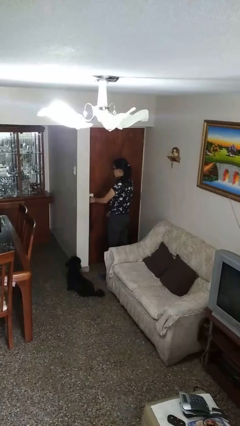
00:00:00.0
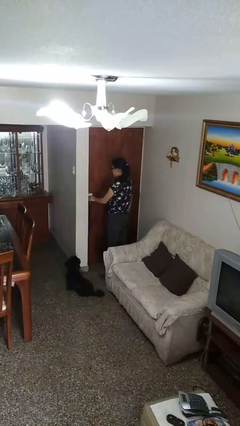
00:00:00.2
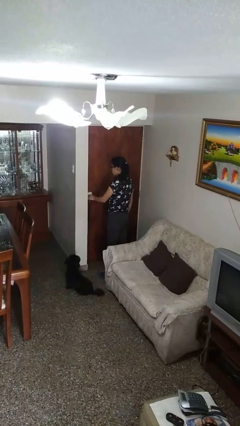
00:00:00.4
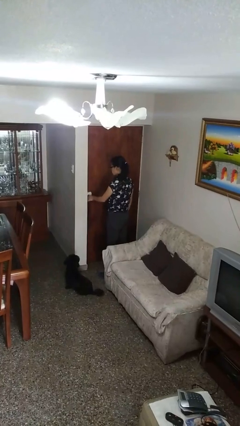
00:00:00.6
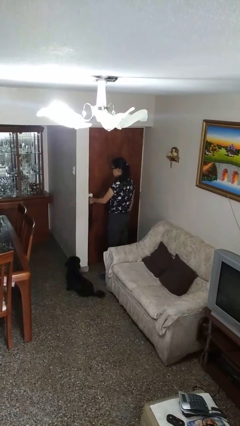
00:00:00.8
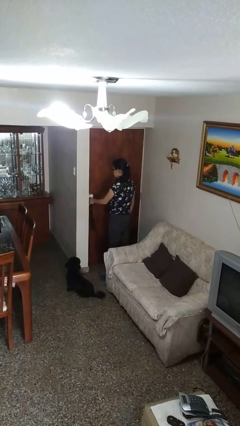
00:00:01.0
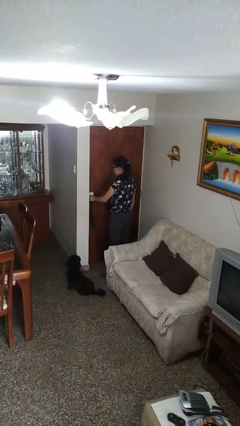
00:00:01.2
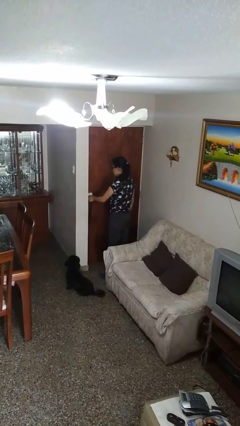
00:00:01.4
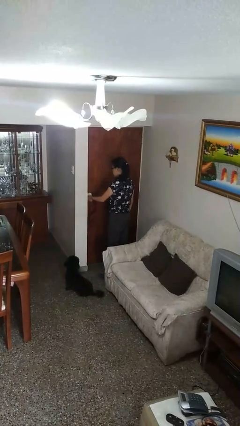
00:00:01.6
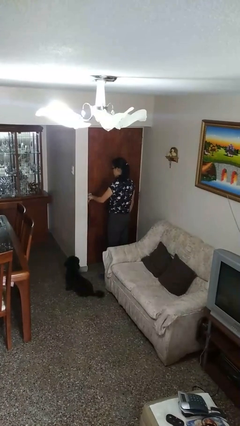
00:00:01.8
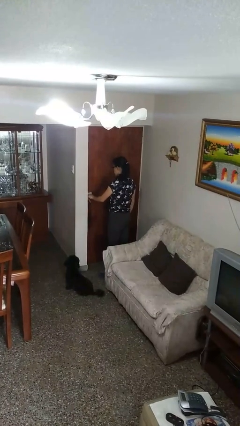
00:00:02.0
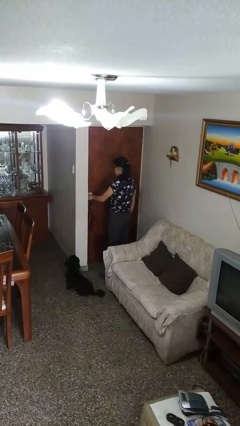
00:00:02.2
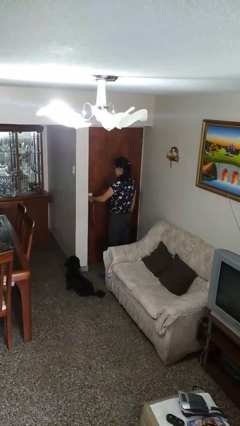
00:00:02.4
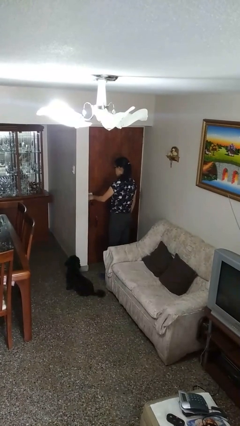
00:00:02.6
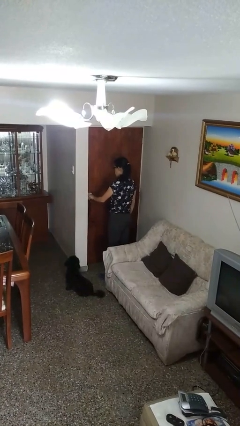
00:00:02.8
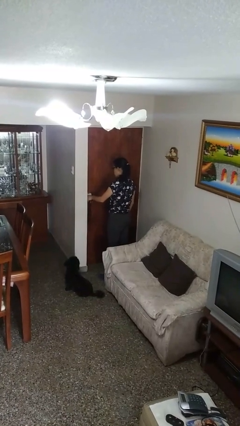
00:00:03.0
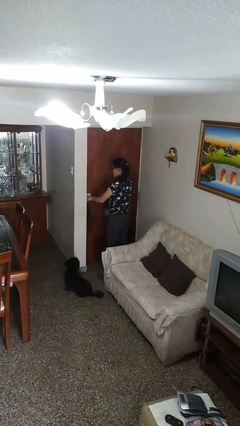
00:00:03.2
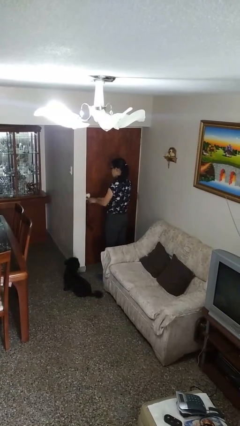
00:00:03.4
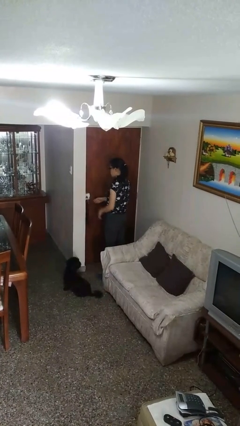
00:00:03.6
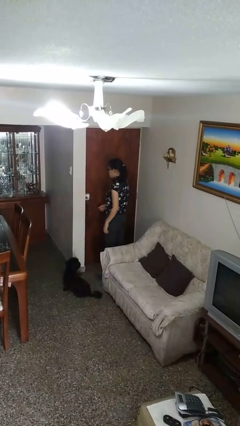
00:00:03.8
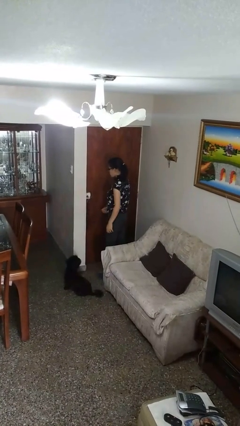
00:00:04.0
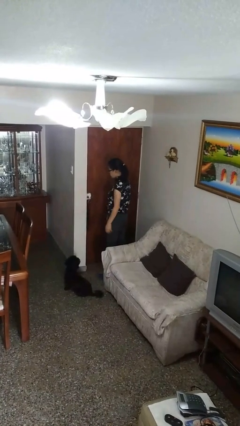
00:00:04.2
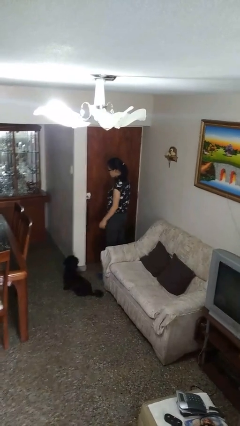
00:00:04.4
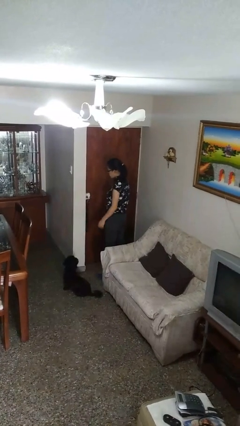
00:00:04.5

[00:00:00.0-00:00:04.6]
person locks door with keys

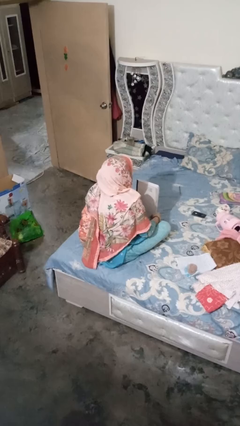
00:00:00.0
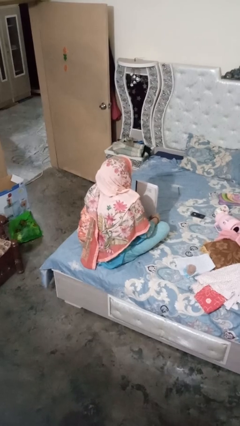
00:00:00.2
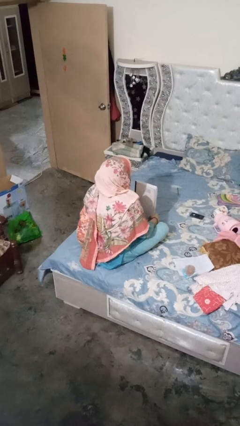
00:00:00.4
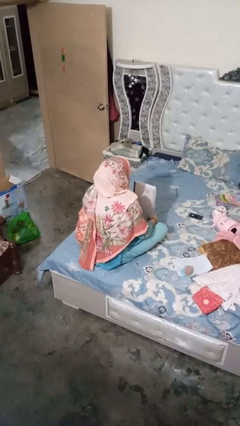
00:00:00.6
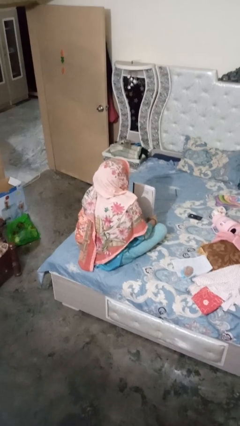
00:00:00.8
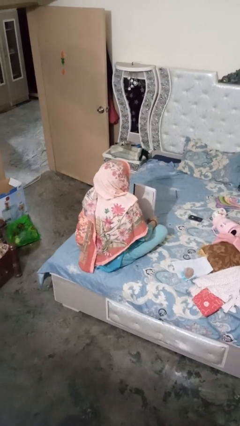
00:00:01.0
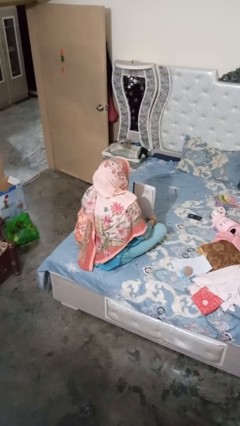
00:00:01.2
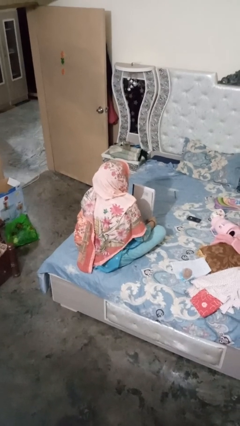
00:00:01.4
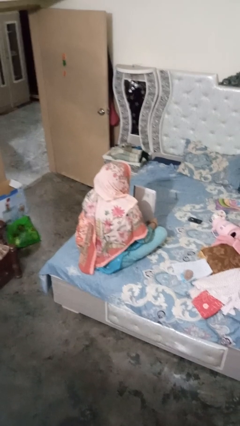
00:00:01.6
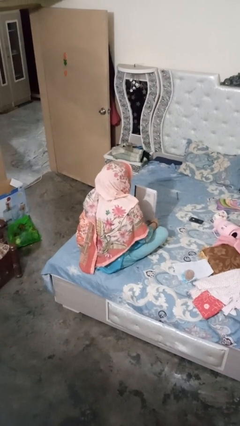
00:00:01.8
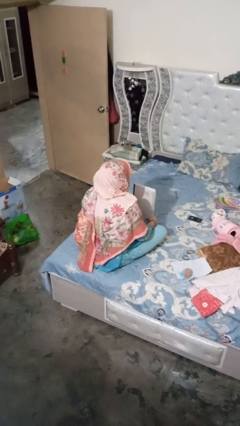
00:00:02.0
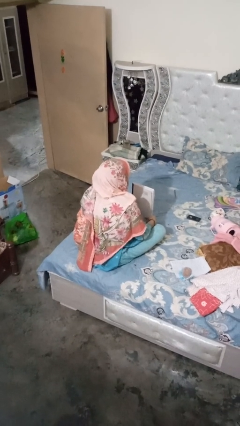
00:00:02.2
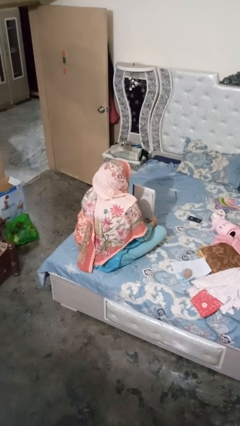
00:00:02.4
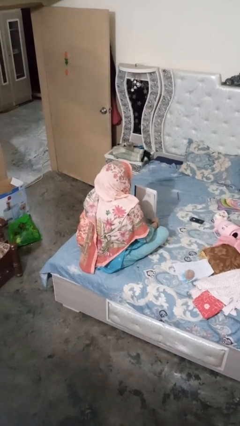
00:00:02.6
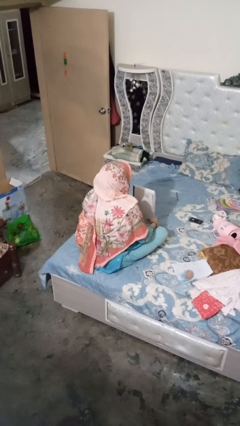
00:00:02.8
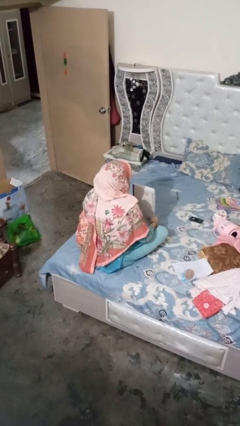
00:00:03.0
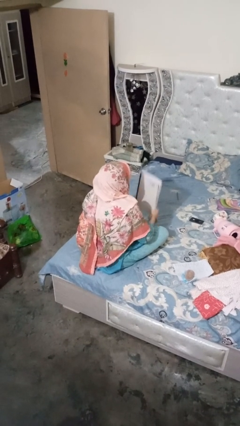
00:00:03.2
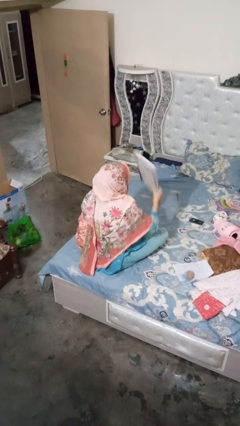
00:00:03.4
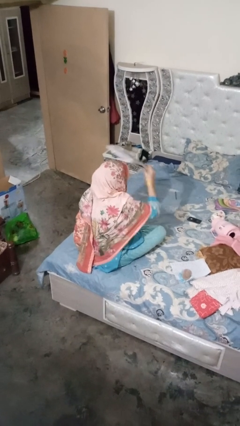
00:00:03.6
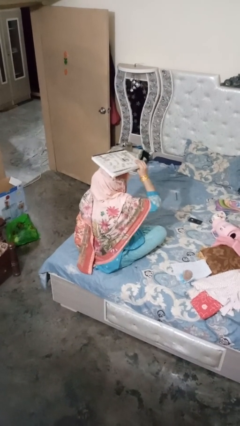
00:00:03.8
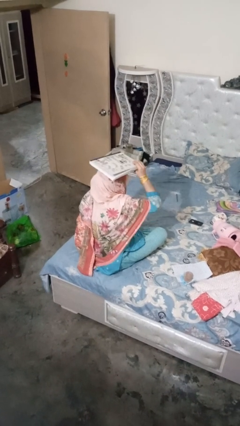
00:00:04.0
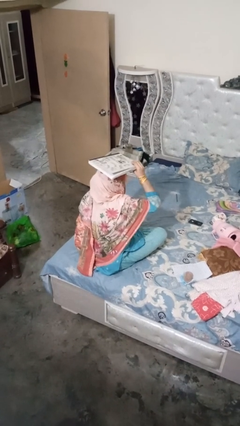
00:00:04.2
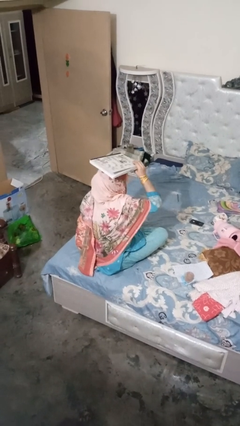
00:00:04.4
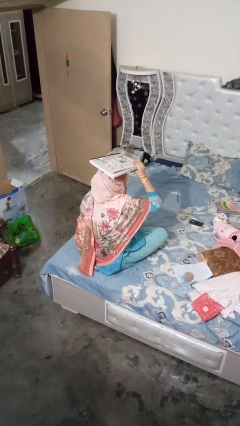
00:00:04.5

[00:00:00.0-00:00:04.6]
person holds object above head

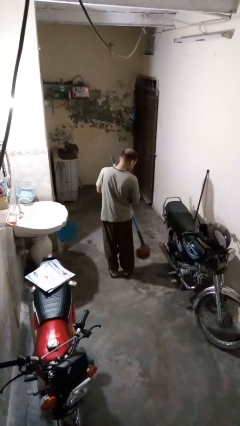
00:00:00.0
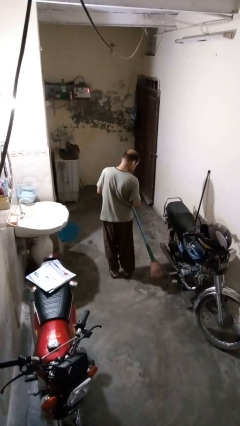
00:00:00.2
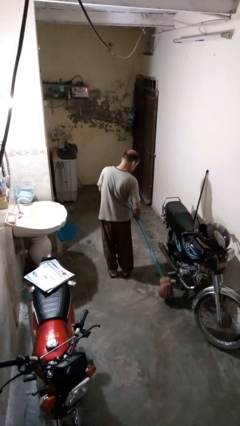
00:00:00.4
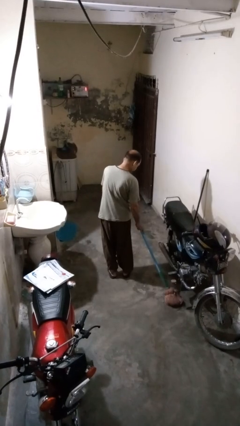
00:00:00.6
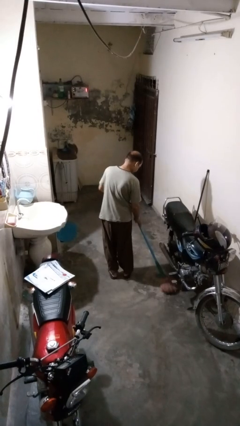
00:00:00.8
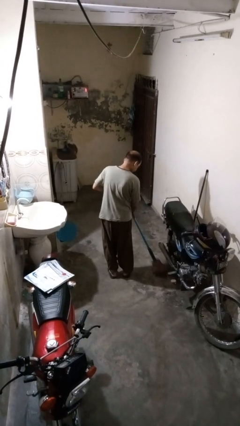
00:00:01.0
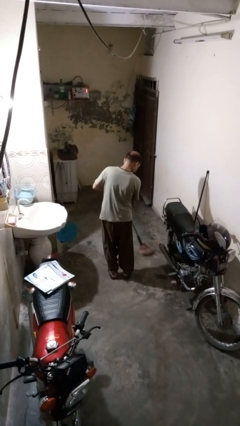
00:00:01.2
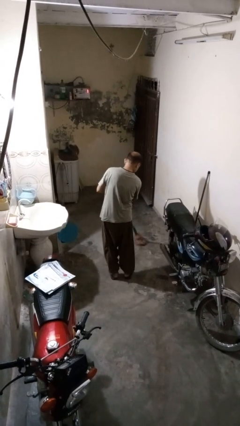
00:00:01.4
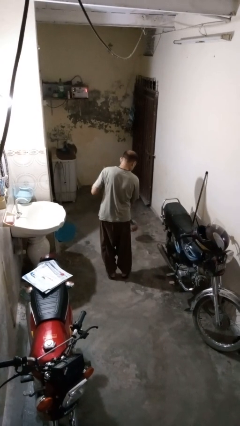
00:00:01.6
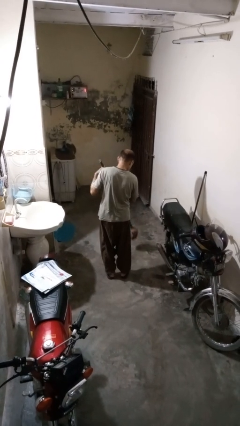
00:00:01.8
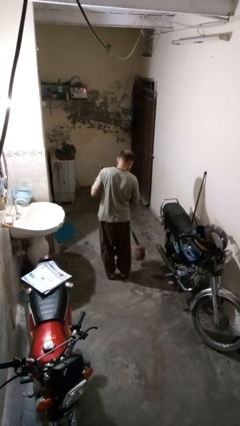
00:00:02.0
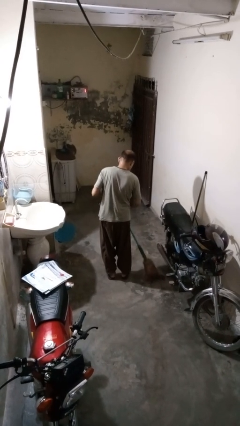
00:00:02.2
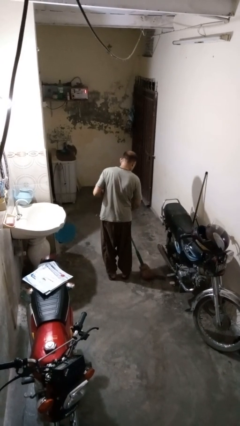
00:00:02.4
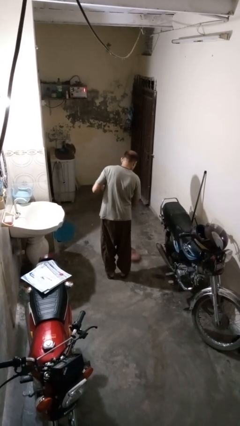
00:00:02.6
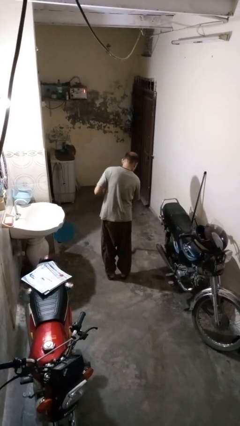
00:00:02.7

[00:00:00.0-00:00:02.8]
person mops

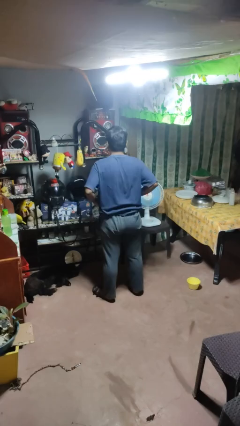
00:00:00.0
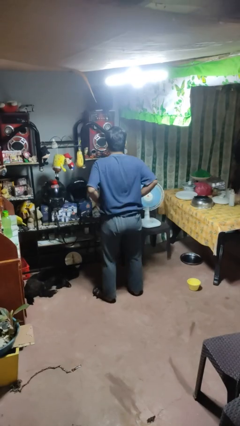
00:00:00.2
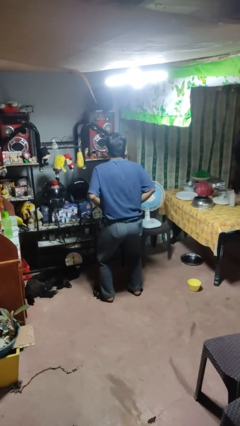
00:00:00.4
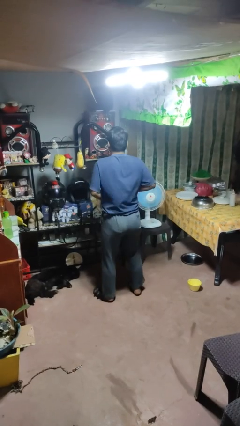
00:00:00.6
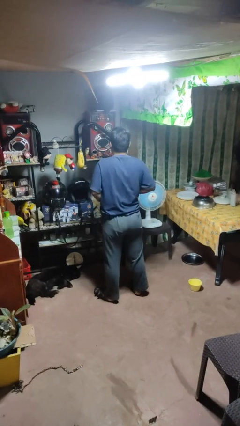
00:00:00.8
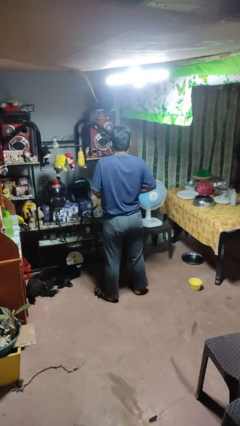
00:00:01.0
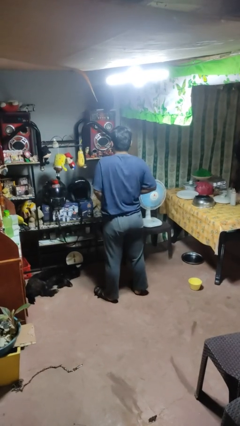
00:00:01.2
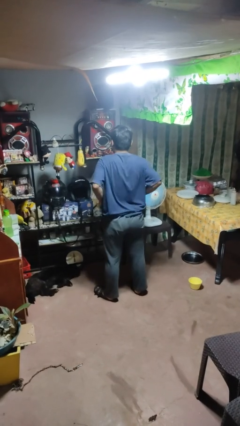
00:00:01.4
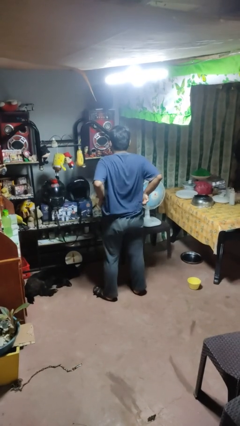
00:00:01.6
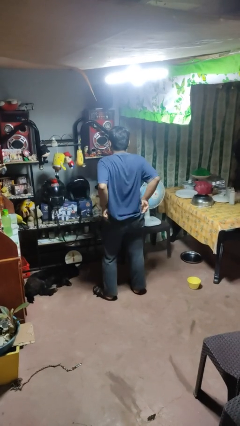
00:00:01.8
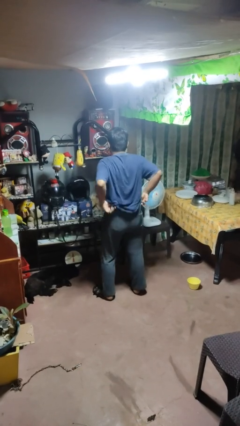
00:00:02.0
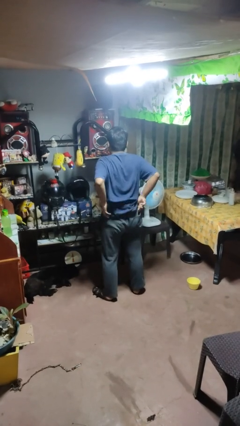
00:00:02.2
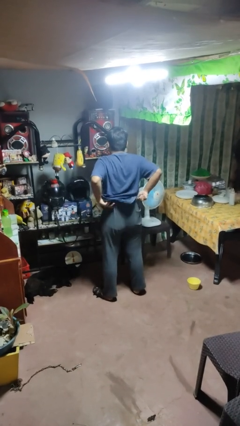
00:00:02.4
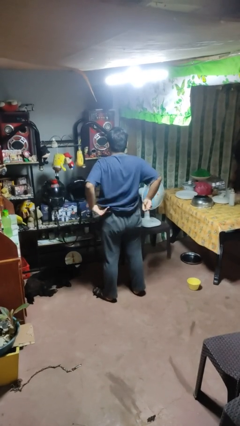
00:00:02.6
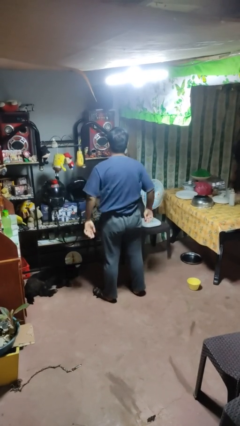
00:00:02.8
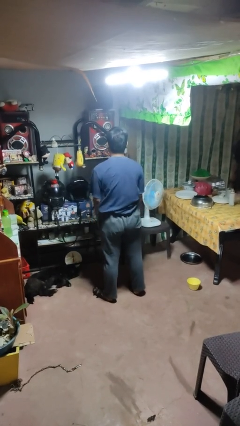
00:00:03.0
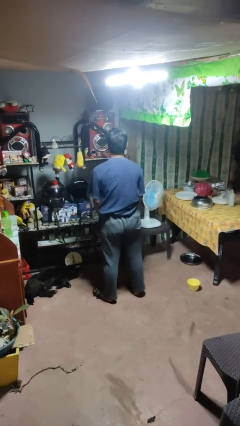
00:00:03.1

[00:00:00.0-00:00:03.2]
person hikes up pants

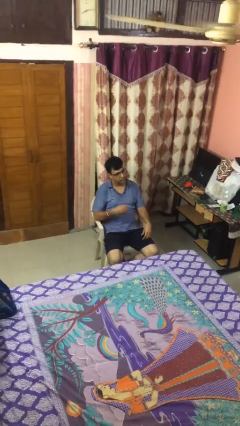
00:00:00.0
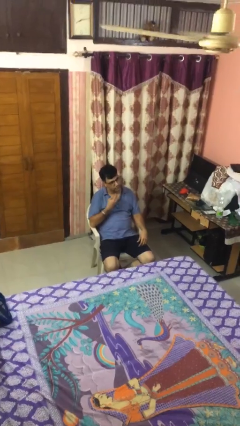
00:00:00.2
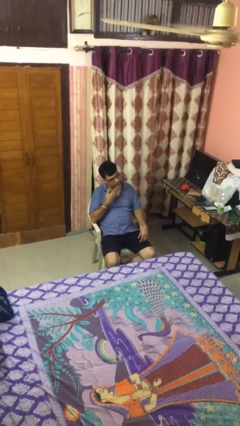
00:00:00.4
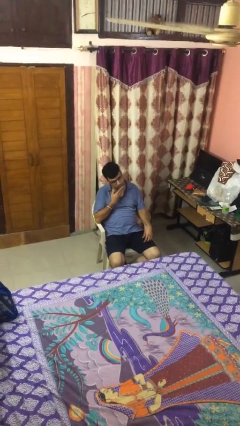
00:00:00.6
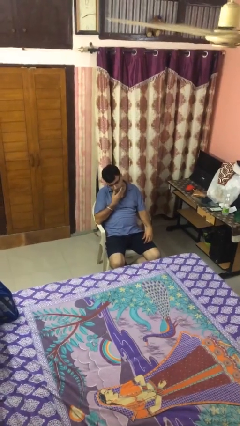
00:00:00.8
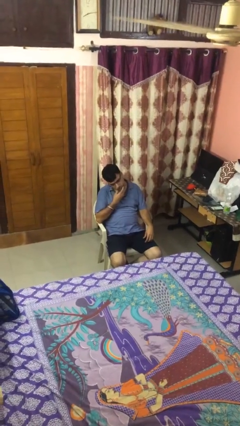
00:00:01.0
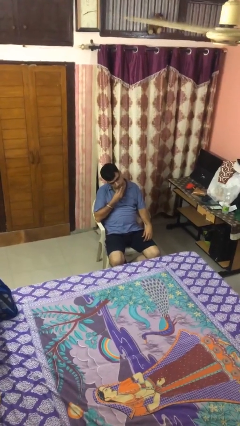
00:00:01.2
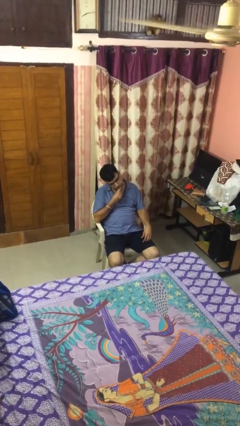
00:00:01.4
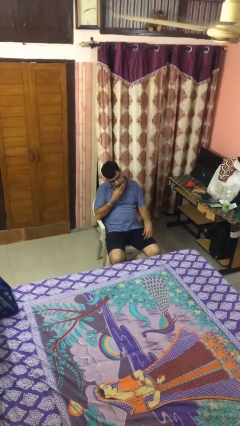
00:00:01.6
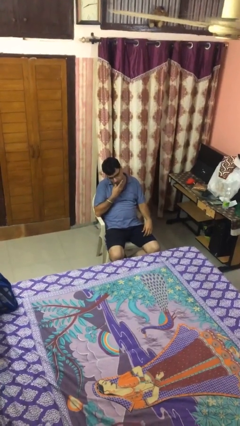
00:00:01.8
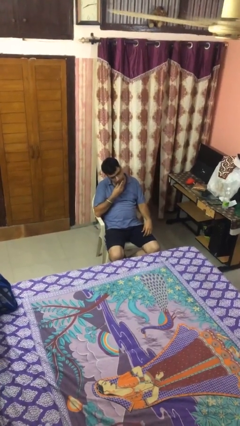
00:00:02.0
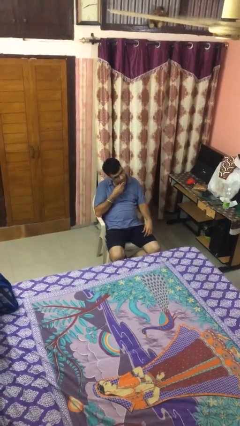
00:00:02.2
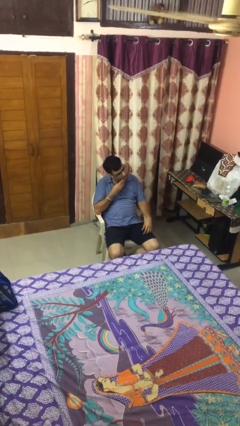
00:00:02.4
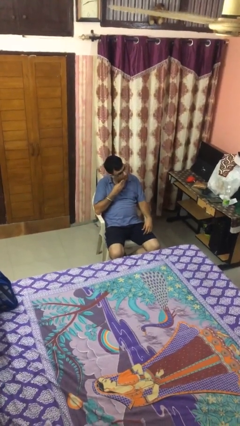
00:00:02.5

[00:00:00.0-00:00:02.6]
person strokes chin
